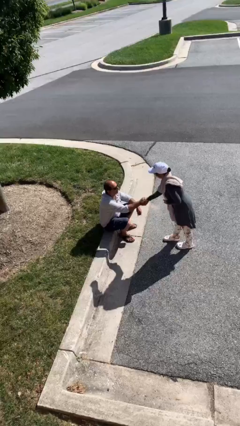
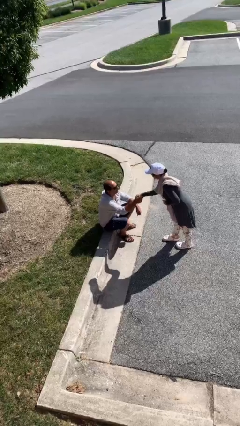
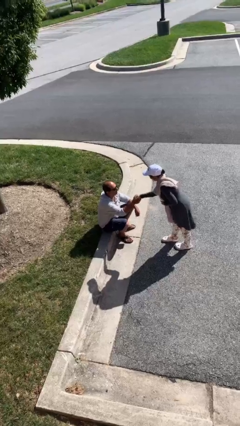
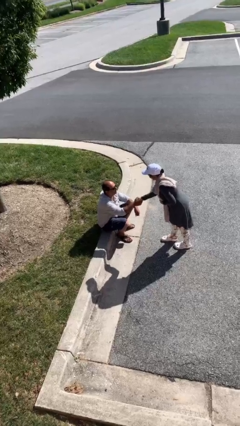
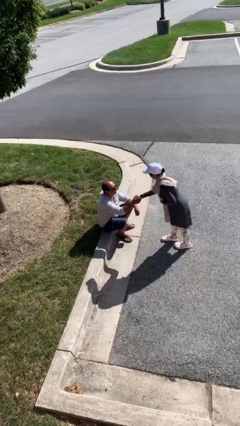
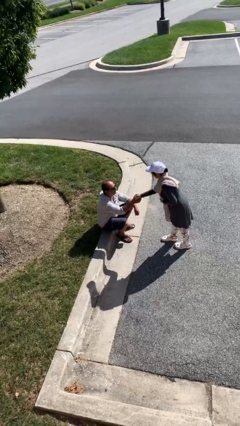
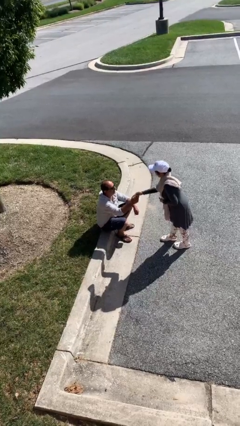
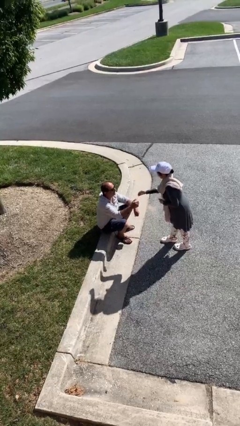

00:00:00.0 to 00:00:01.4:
person shakes hand

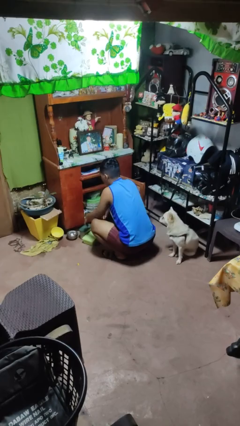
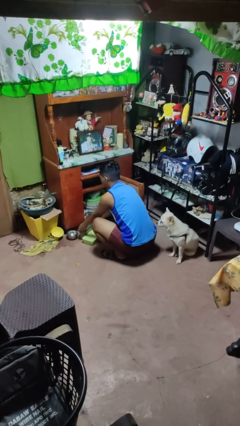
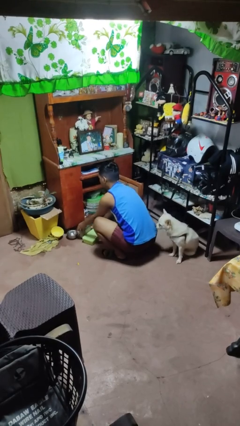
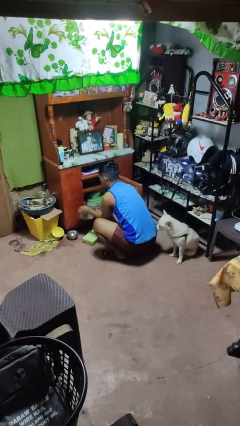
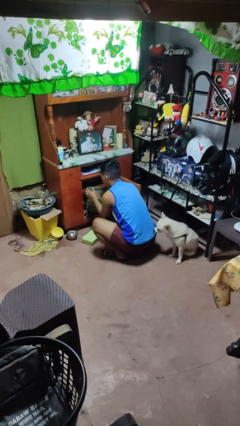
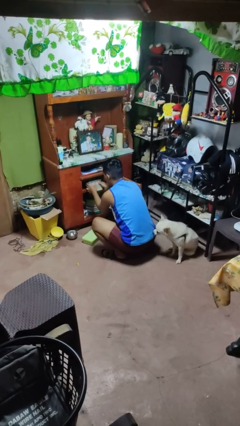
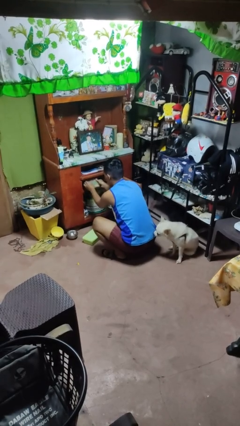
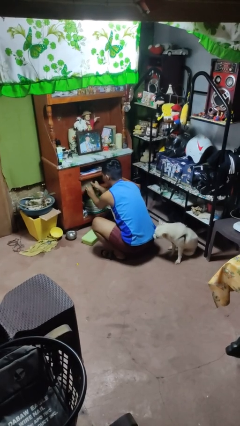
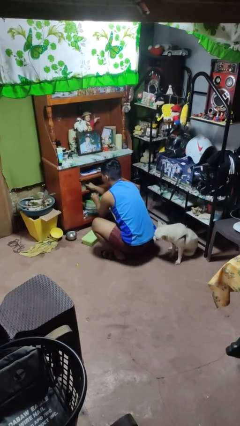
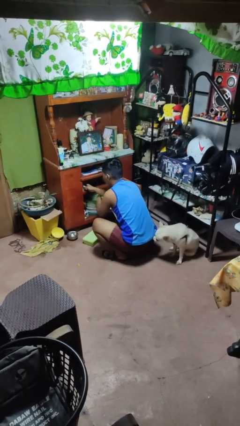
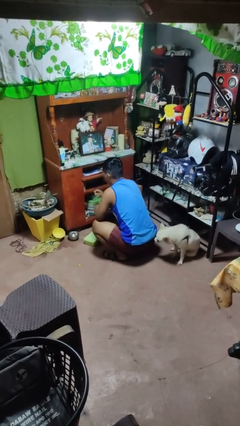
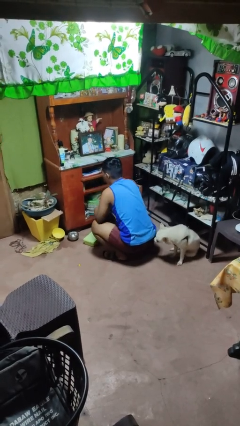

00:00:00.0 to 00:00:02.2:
person puts object in cabinet

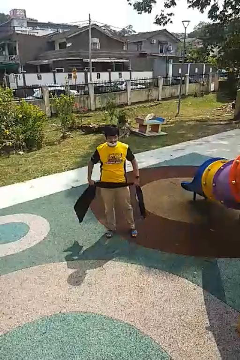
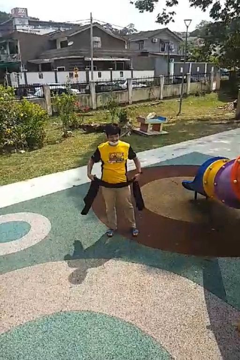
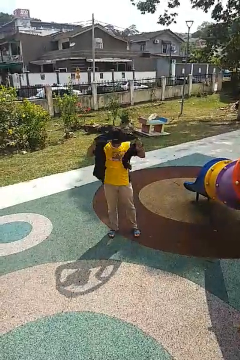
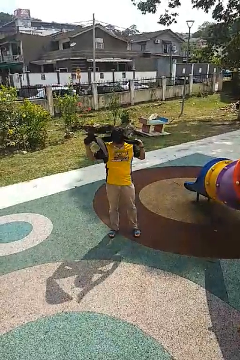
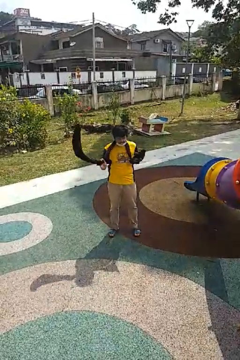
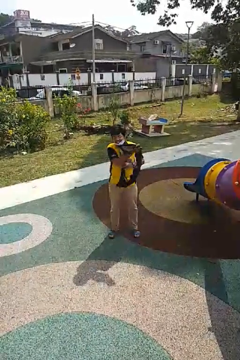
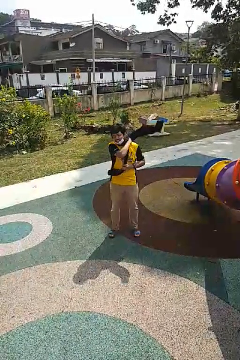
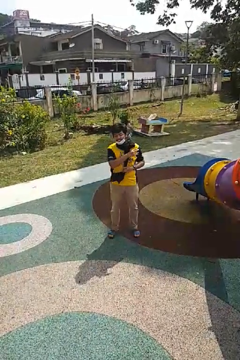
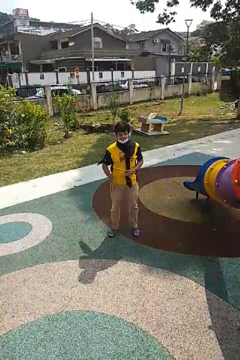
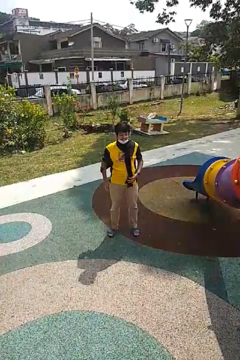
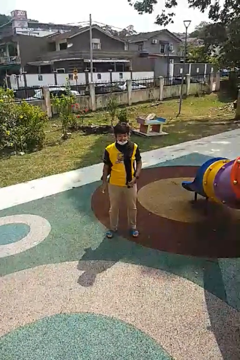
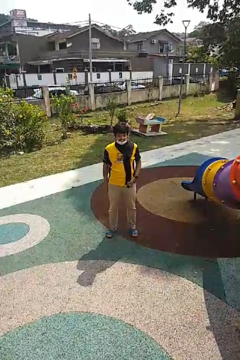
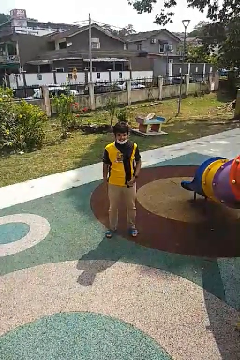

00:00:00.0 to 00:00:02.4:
person puts on scarf

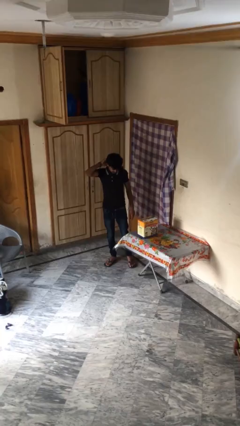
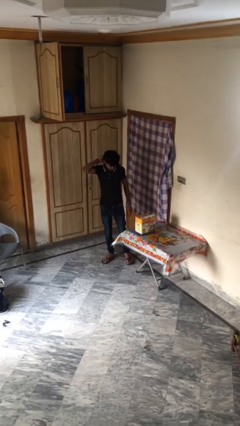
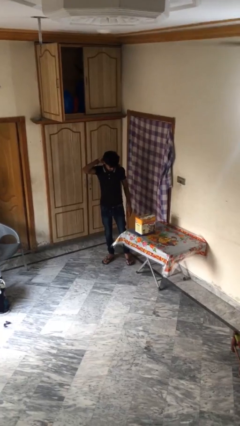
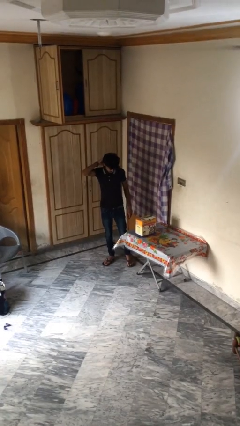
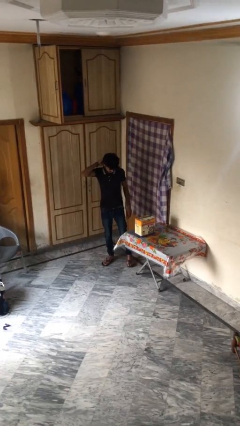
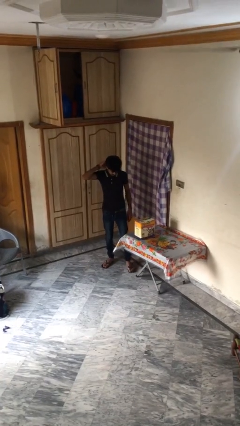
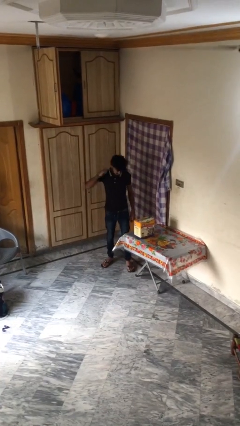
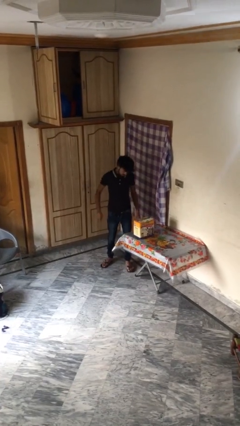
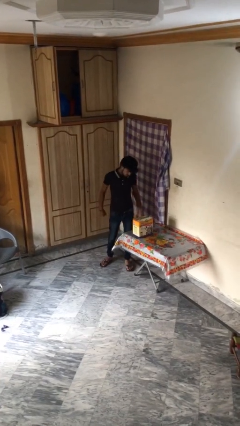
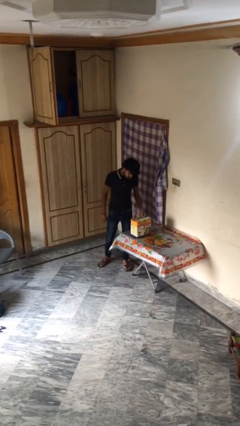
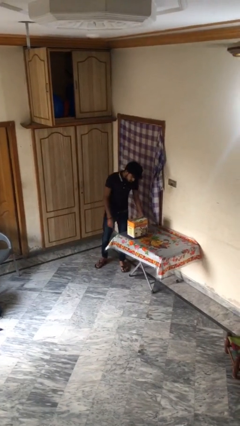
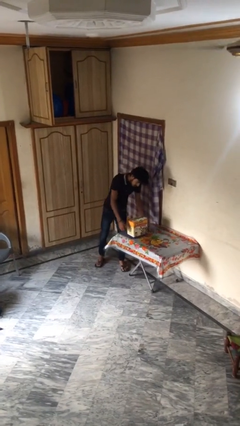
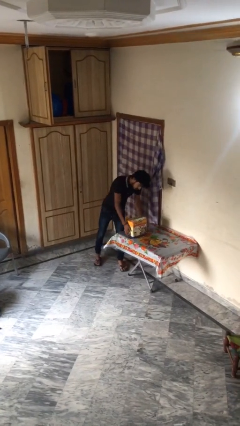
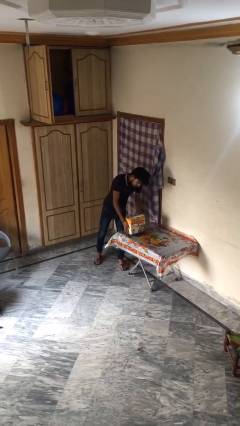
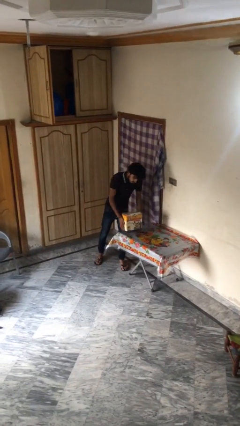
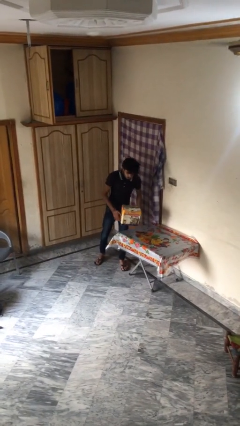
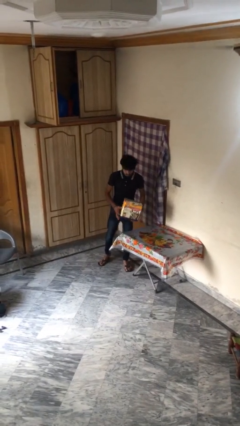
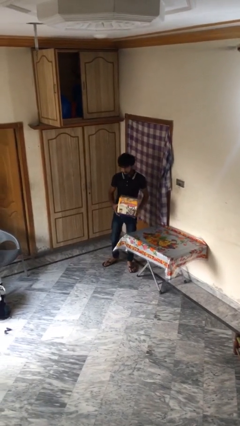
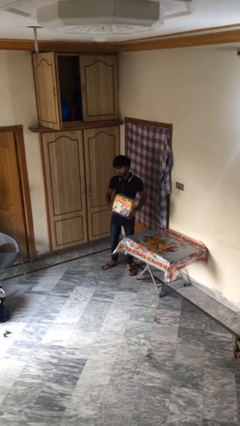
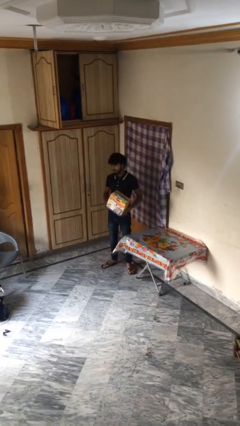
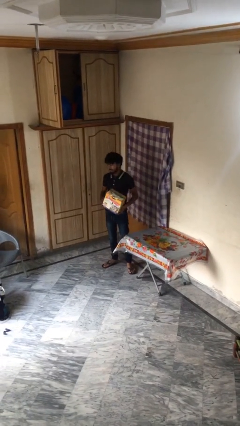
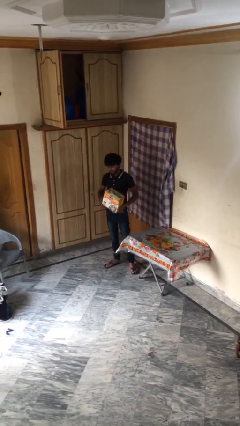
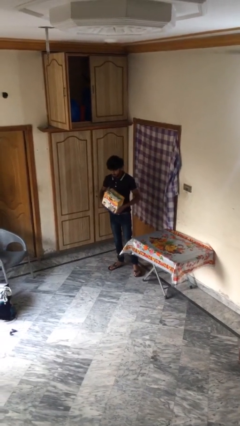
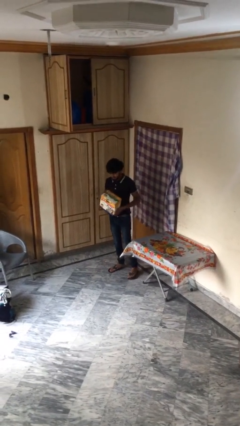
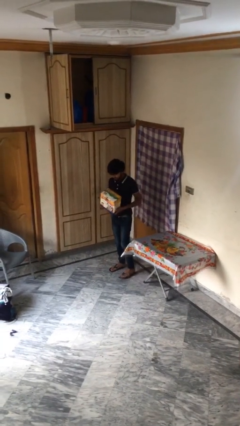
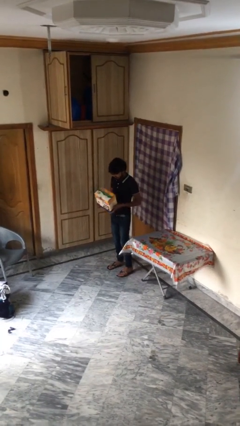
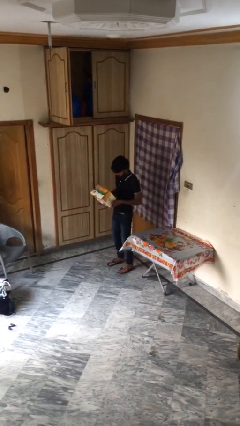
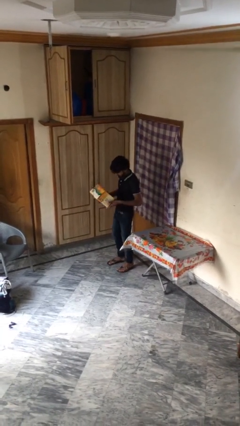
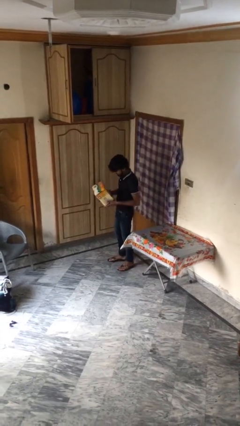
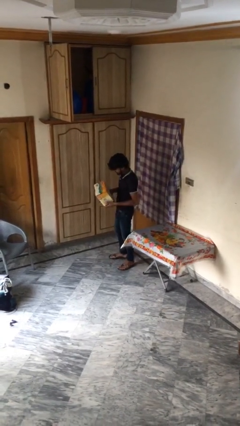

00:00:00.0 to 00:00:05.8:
person picks up object from table

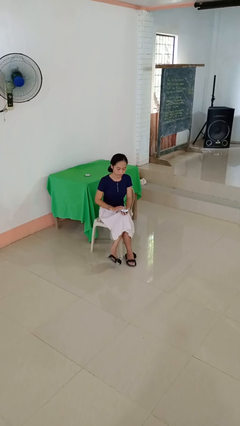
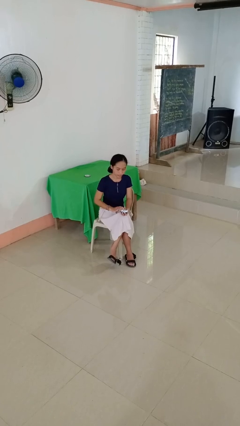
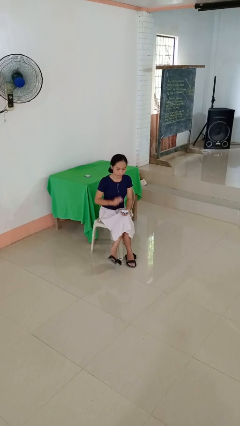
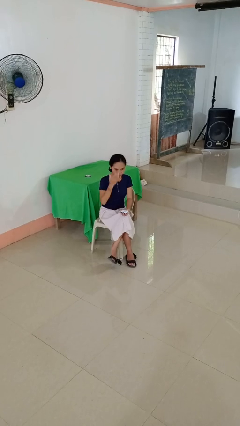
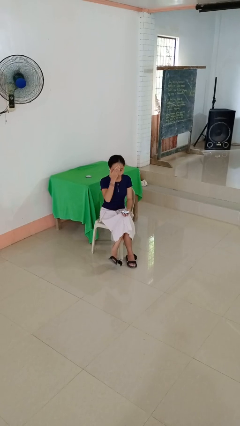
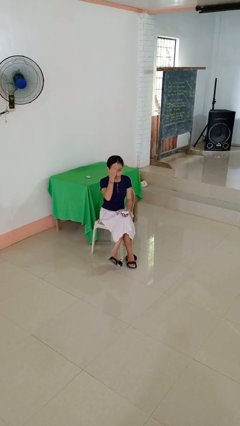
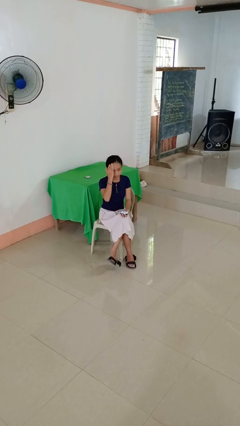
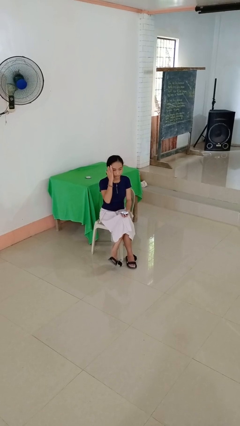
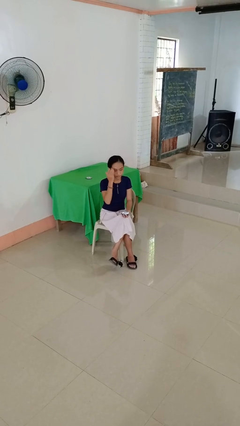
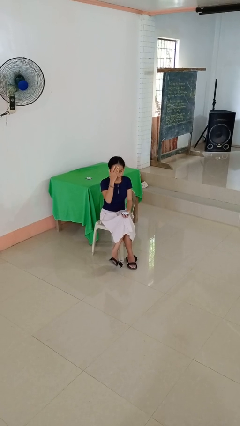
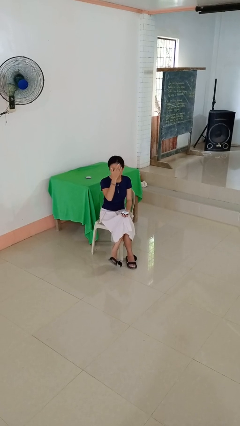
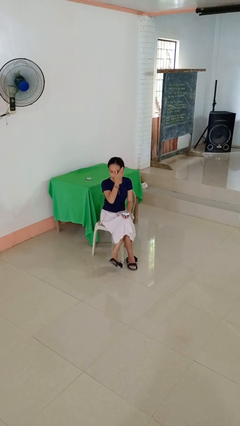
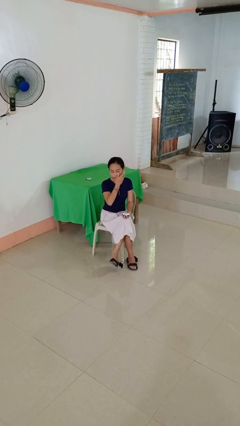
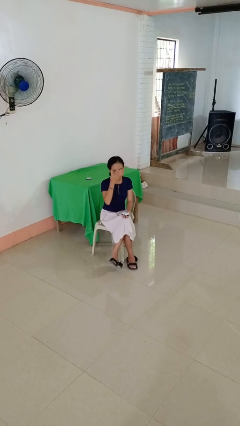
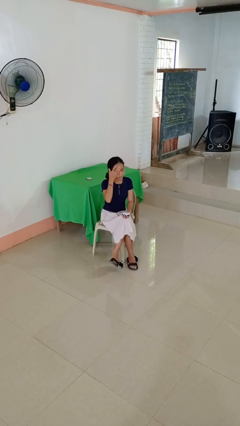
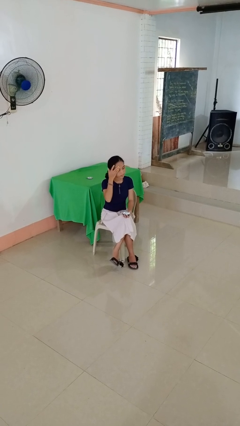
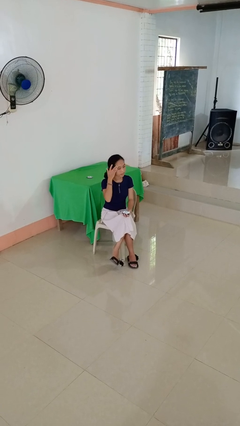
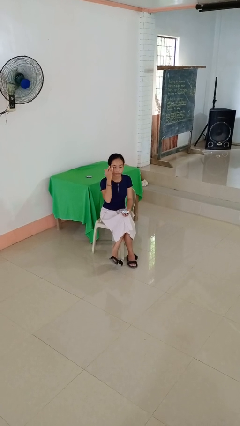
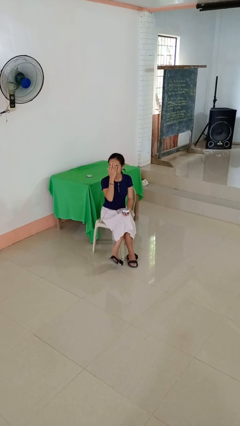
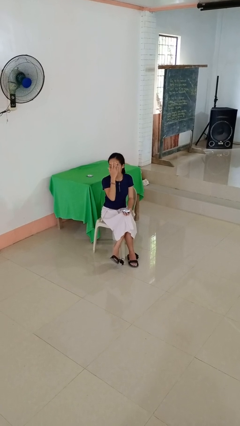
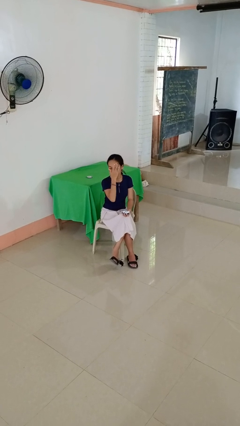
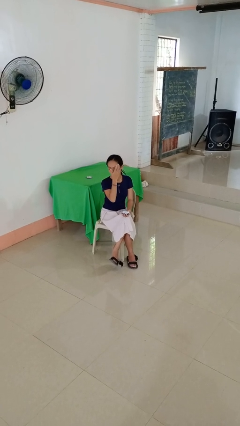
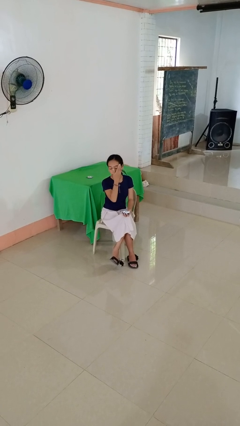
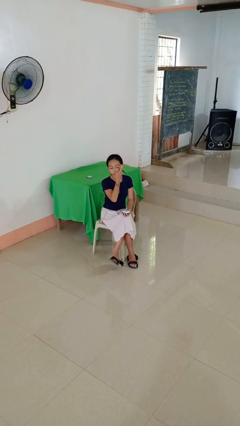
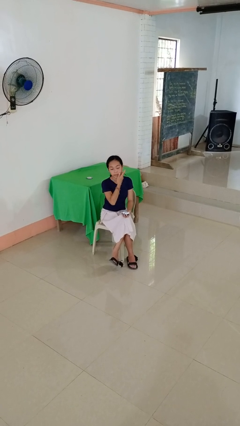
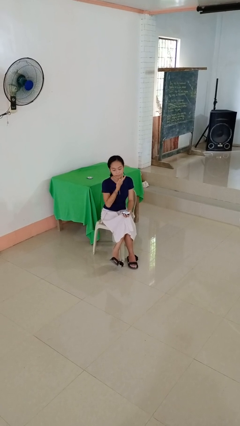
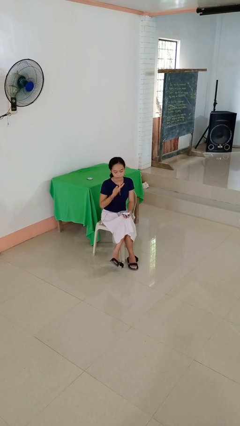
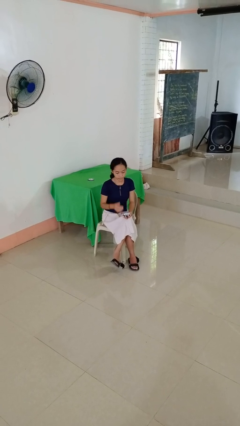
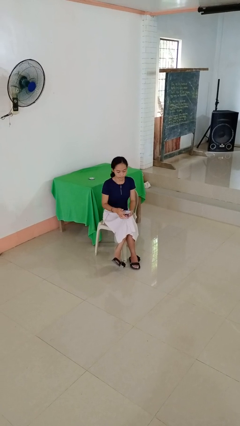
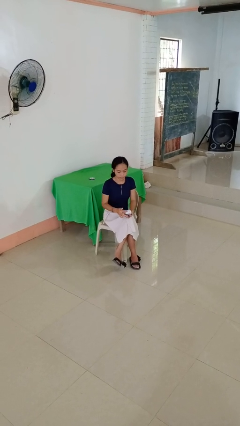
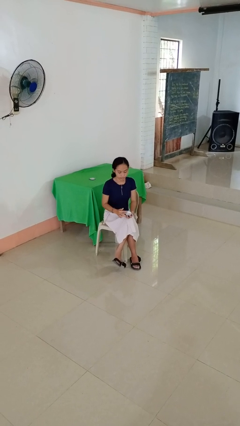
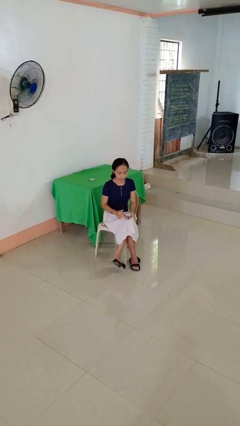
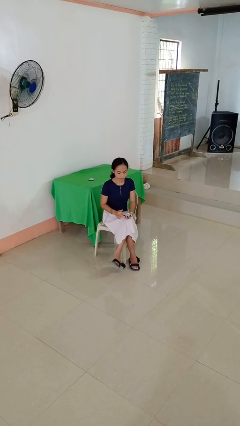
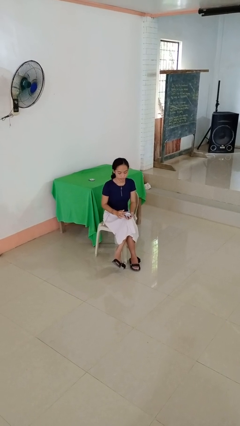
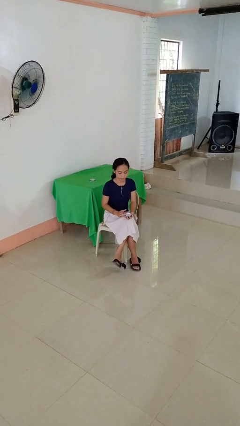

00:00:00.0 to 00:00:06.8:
person applies facial moisturizer
